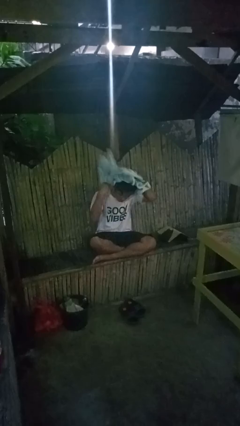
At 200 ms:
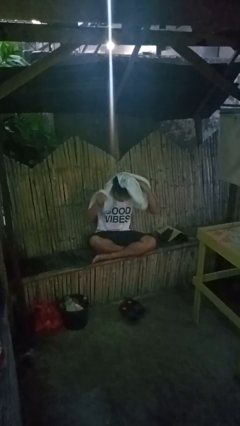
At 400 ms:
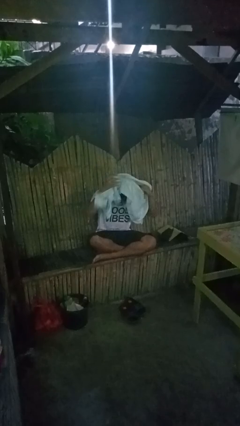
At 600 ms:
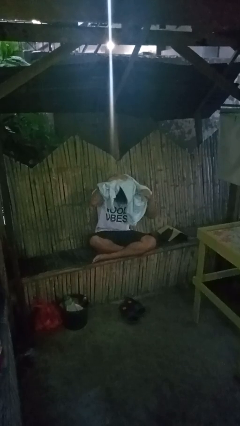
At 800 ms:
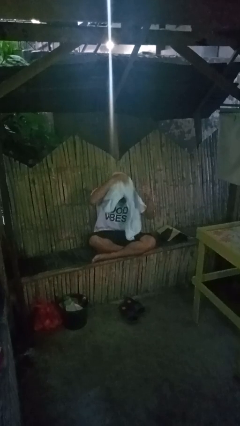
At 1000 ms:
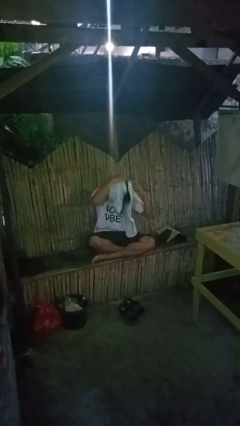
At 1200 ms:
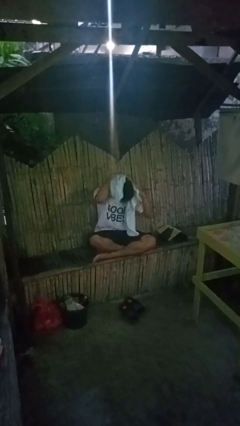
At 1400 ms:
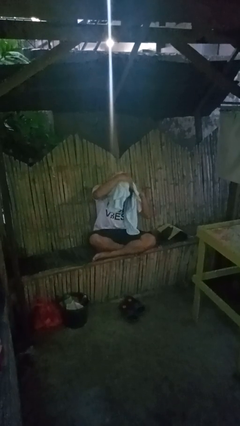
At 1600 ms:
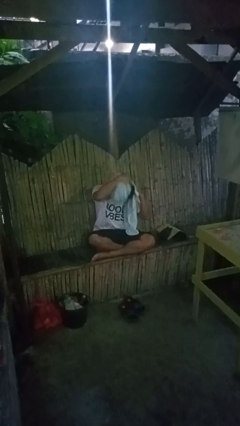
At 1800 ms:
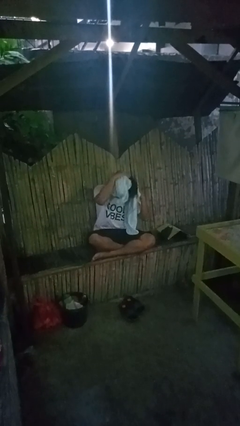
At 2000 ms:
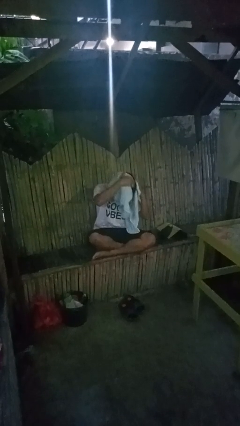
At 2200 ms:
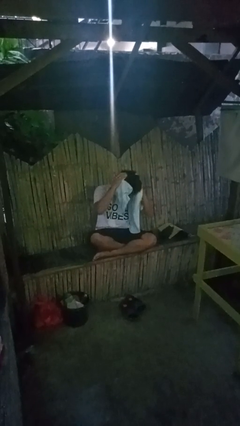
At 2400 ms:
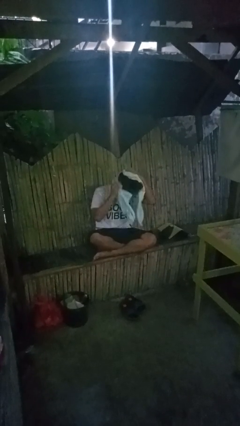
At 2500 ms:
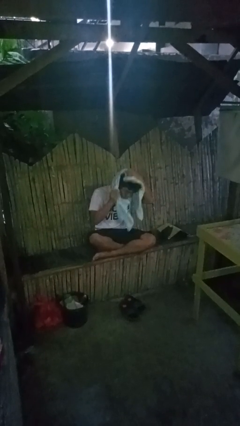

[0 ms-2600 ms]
person dries hair with towel

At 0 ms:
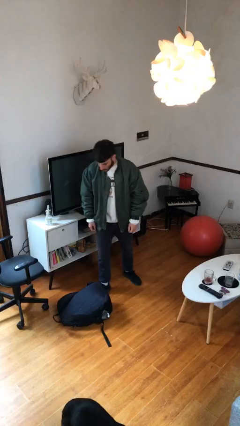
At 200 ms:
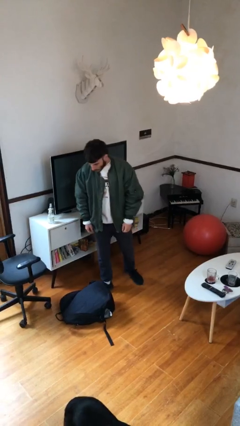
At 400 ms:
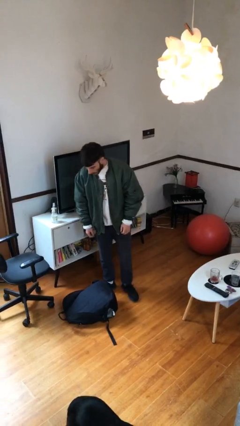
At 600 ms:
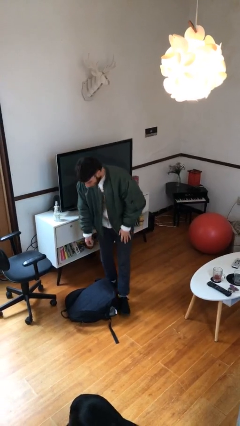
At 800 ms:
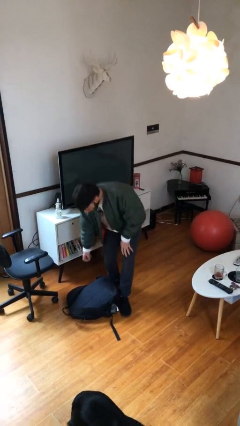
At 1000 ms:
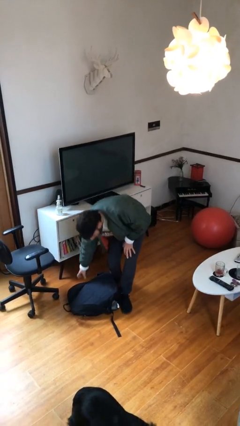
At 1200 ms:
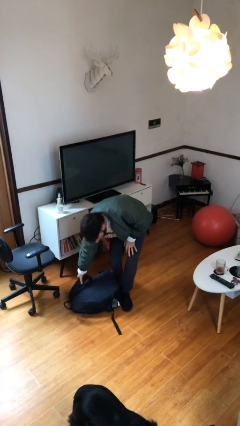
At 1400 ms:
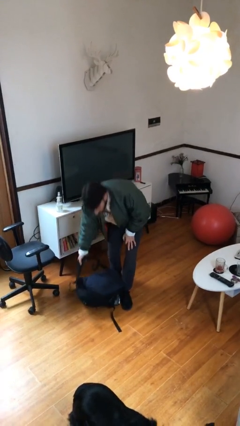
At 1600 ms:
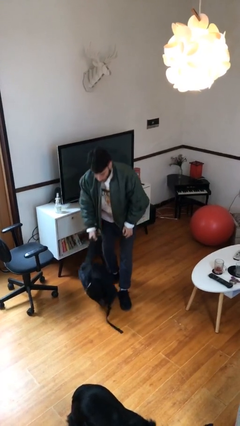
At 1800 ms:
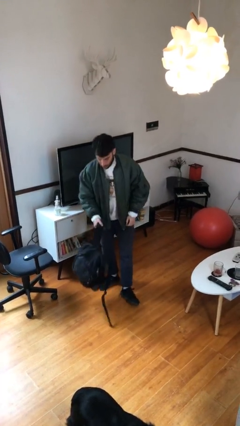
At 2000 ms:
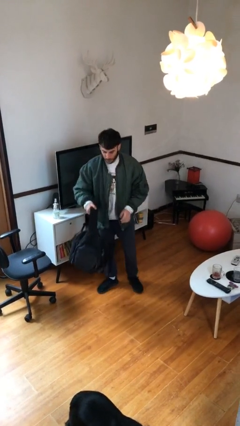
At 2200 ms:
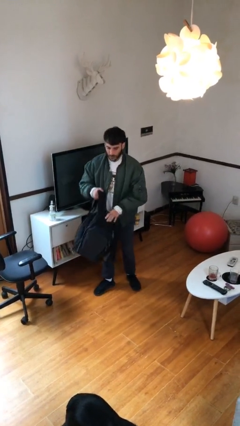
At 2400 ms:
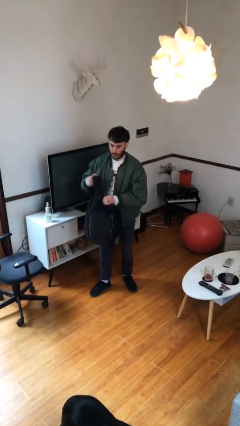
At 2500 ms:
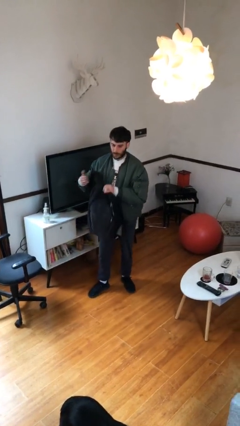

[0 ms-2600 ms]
person picks up object from floor

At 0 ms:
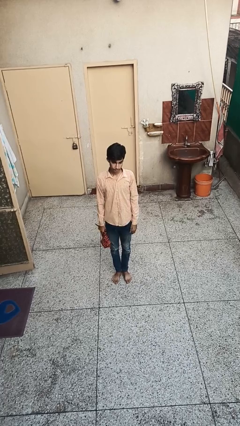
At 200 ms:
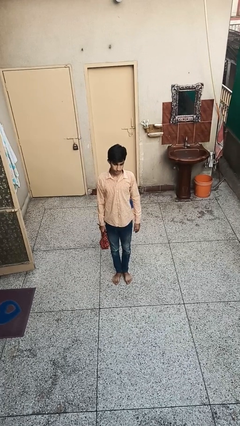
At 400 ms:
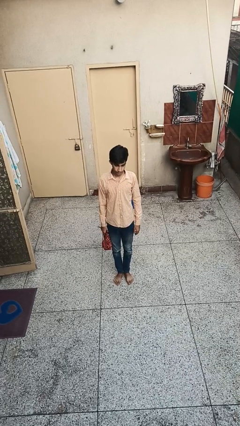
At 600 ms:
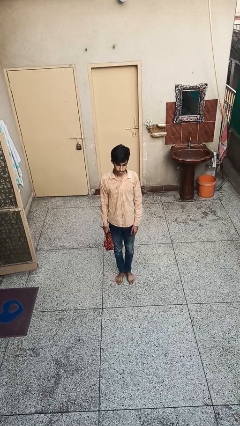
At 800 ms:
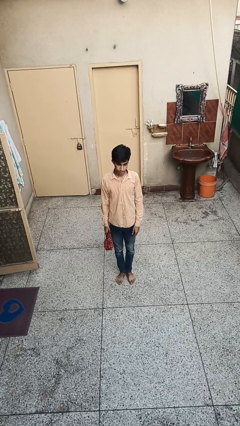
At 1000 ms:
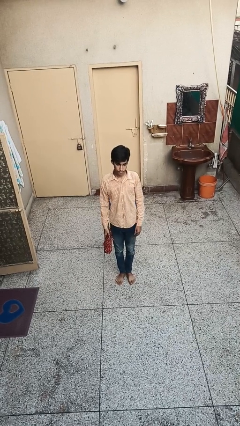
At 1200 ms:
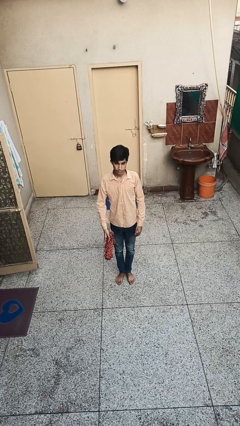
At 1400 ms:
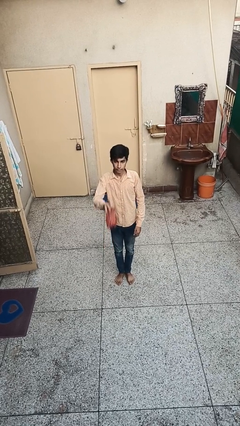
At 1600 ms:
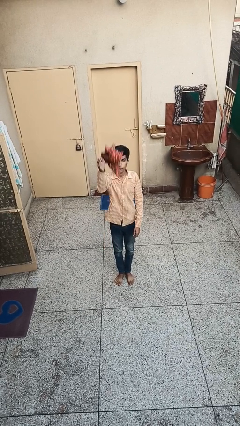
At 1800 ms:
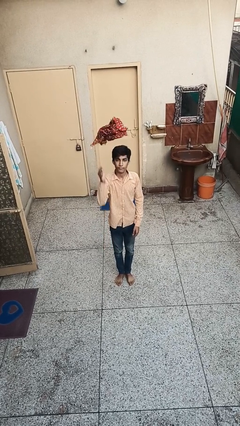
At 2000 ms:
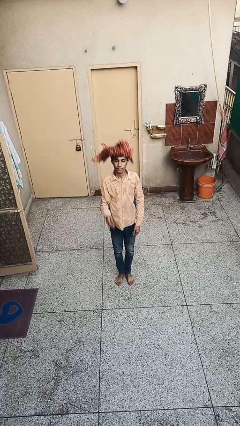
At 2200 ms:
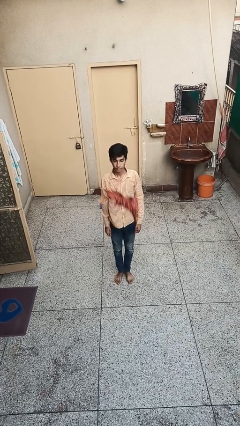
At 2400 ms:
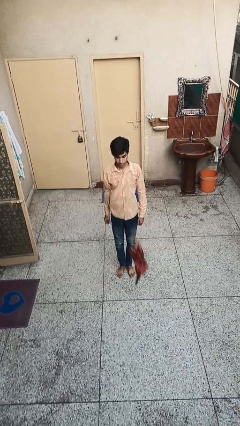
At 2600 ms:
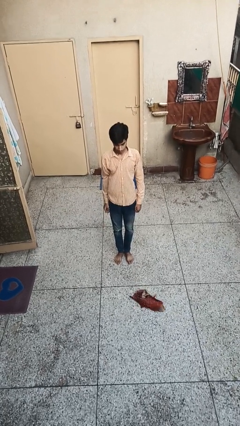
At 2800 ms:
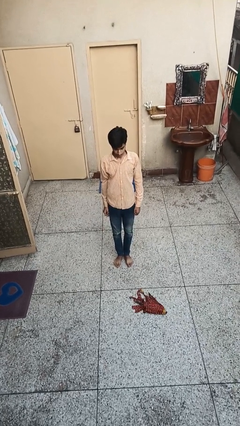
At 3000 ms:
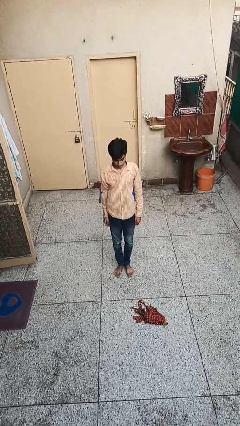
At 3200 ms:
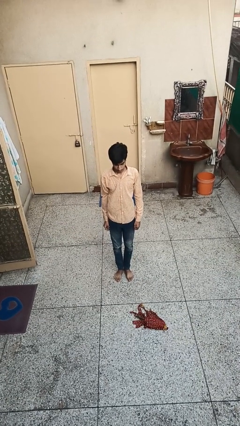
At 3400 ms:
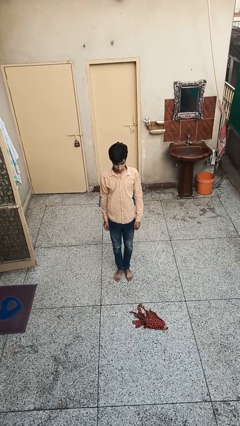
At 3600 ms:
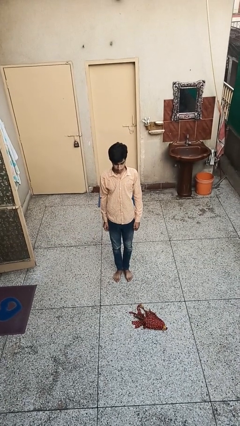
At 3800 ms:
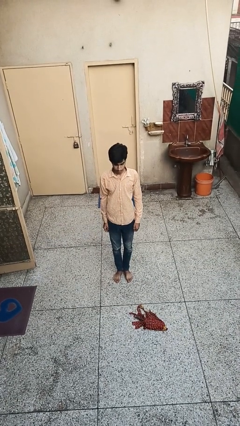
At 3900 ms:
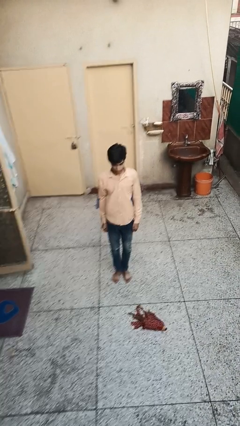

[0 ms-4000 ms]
person throws object into air

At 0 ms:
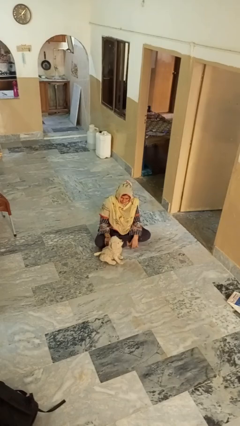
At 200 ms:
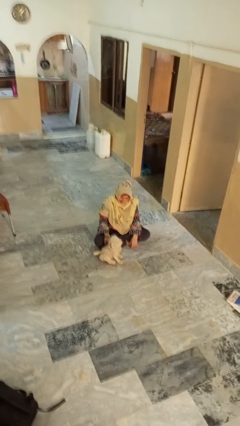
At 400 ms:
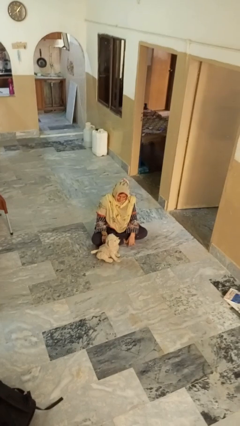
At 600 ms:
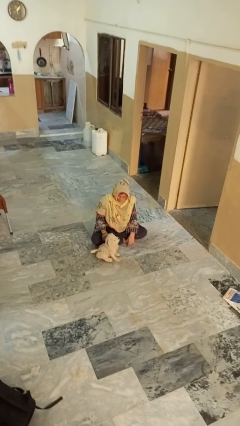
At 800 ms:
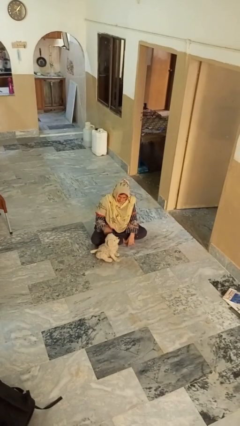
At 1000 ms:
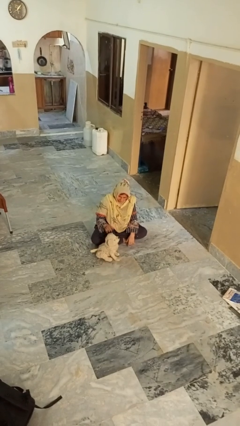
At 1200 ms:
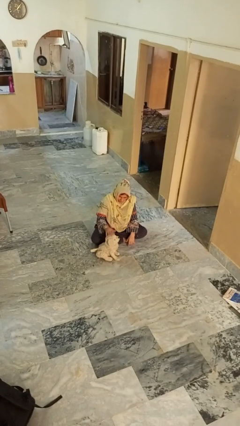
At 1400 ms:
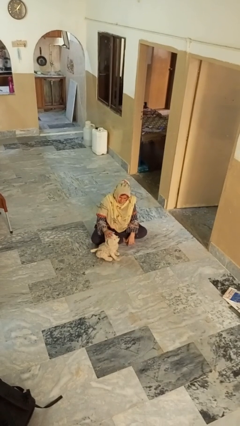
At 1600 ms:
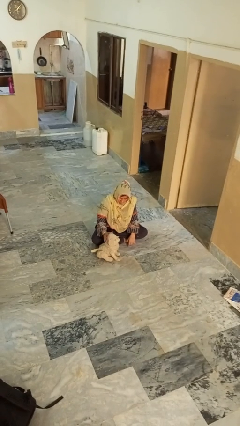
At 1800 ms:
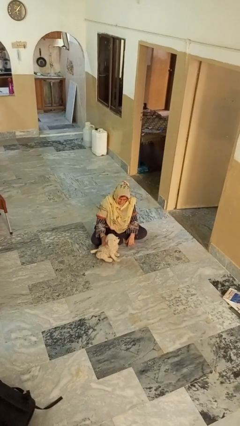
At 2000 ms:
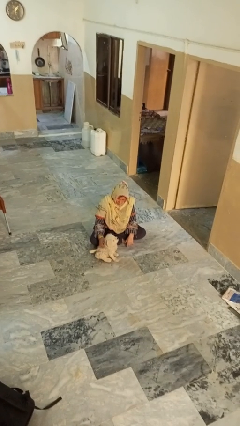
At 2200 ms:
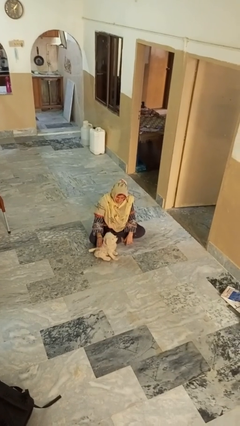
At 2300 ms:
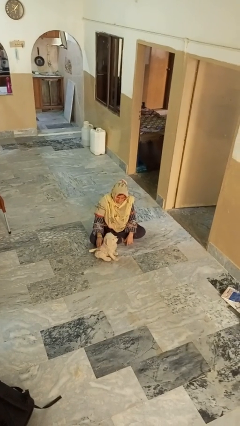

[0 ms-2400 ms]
person pets dog

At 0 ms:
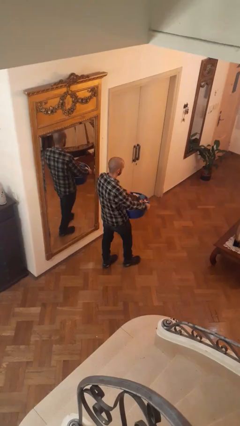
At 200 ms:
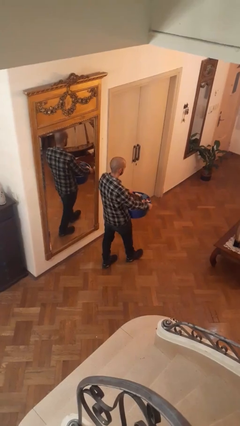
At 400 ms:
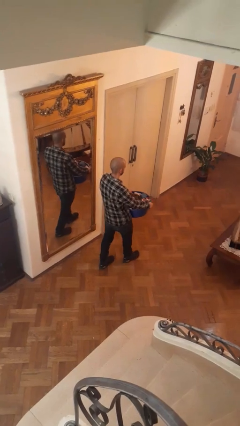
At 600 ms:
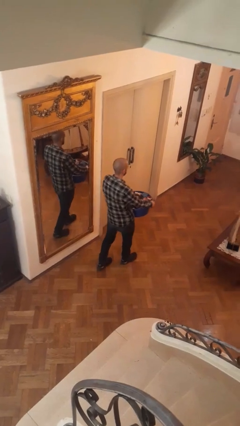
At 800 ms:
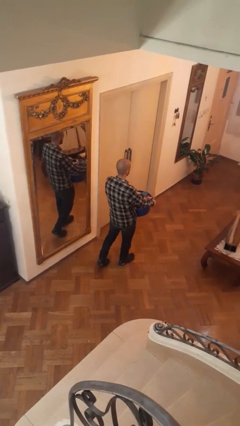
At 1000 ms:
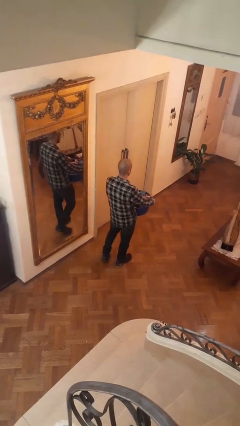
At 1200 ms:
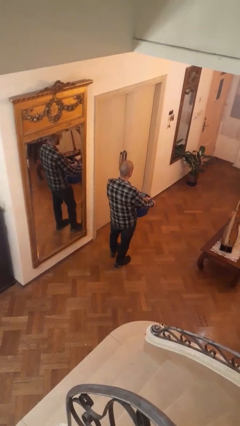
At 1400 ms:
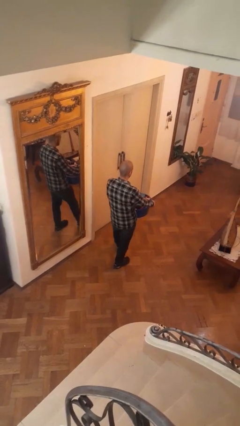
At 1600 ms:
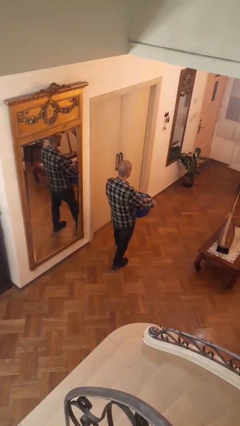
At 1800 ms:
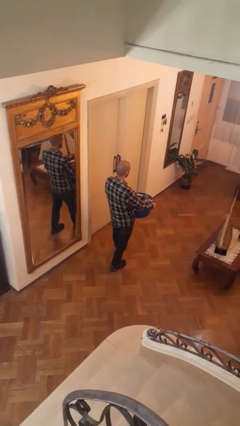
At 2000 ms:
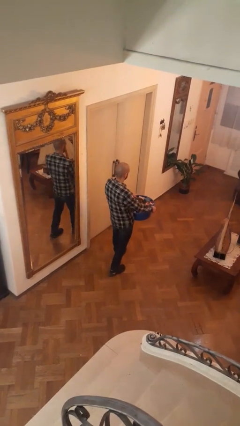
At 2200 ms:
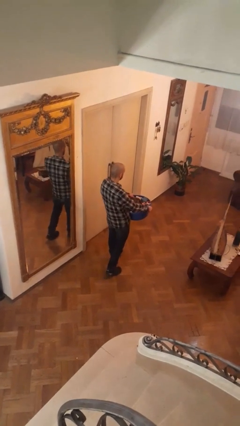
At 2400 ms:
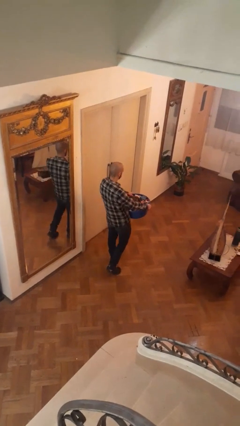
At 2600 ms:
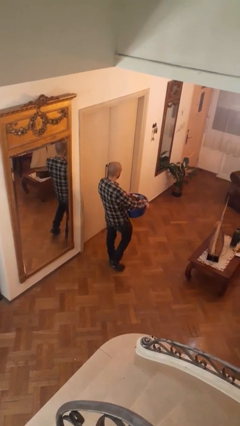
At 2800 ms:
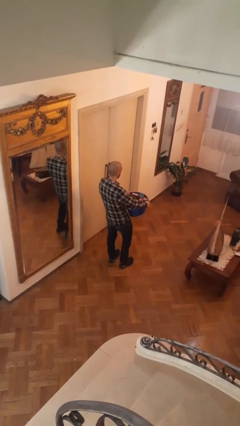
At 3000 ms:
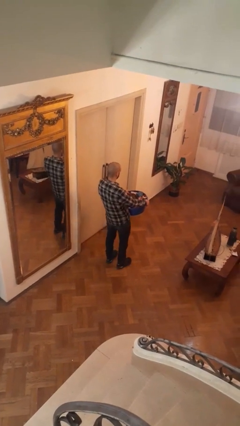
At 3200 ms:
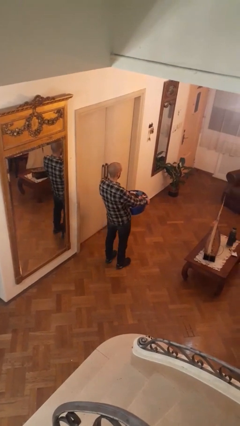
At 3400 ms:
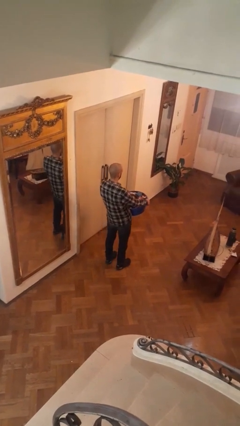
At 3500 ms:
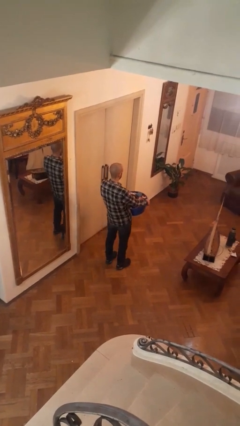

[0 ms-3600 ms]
person carries laundry basket

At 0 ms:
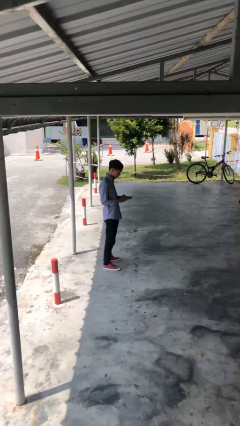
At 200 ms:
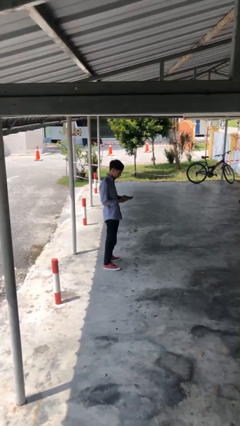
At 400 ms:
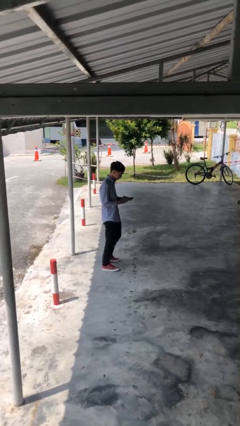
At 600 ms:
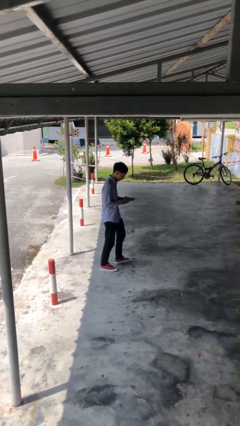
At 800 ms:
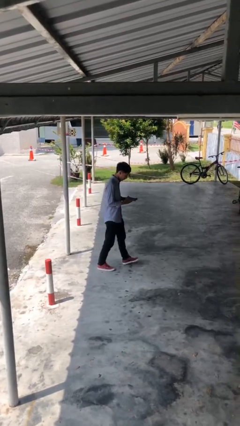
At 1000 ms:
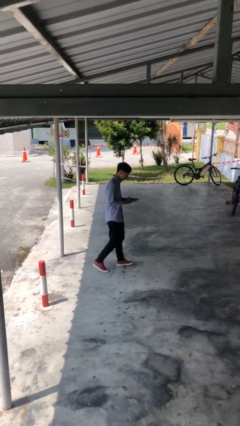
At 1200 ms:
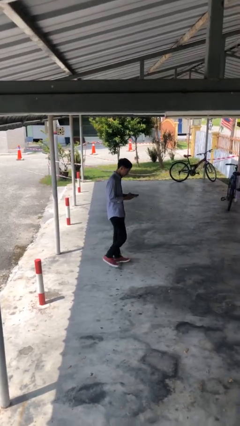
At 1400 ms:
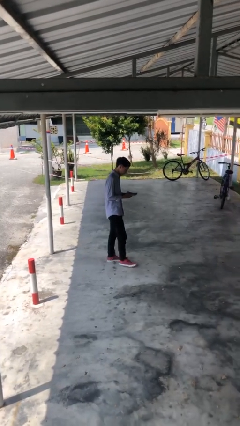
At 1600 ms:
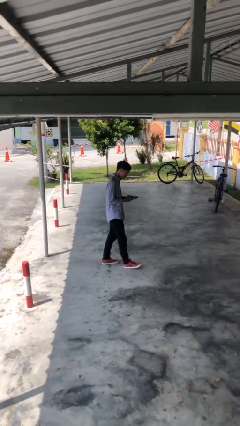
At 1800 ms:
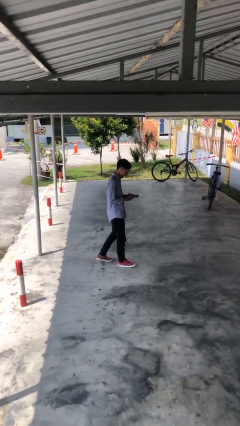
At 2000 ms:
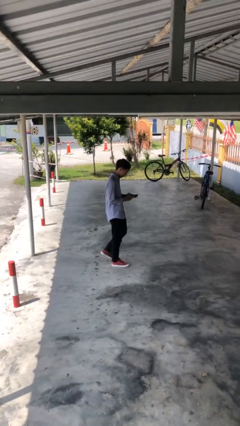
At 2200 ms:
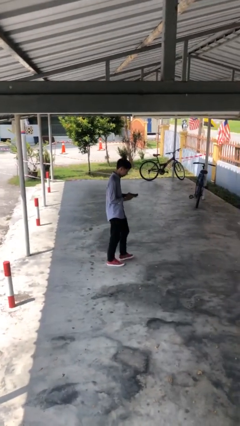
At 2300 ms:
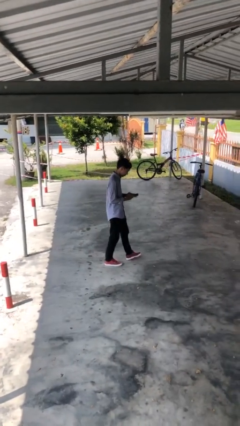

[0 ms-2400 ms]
person texts on phone
